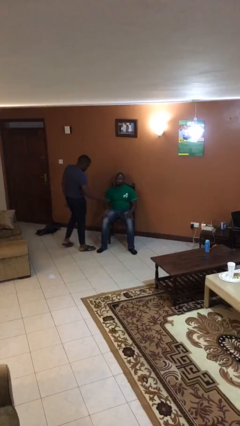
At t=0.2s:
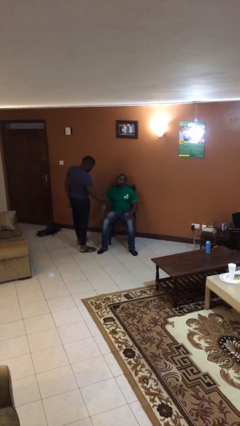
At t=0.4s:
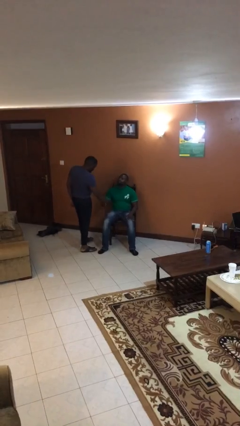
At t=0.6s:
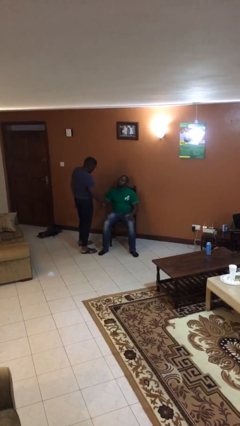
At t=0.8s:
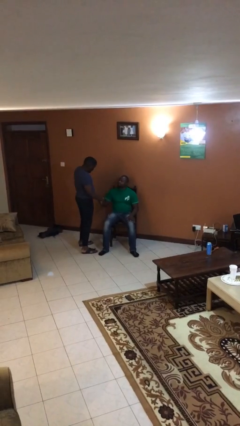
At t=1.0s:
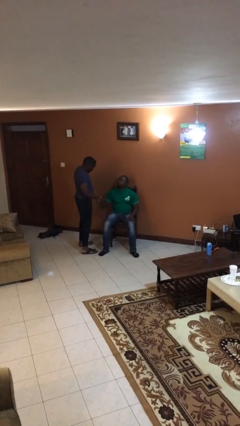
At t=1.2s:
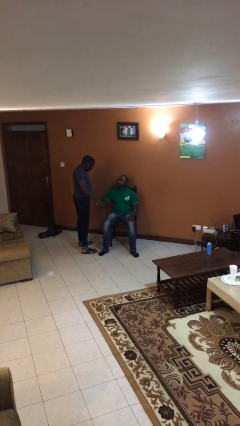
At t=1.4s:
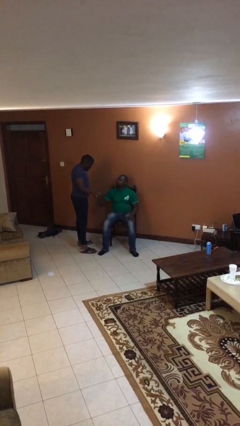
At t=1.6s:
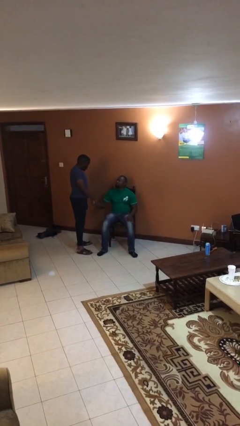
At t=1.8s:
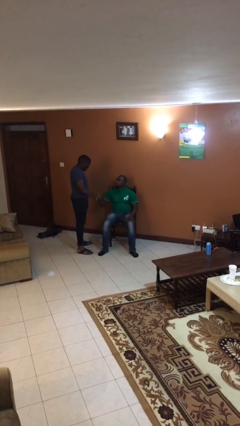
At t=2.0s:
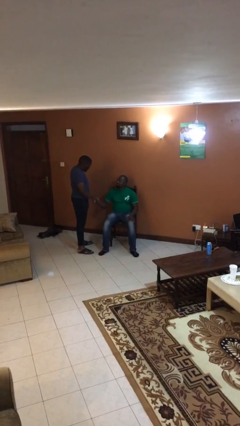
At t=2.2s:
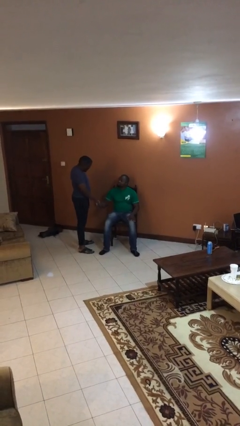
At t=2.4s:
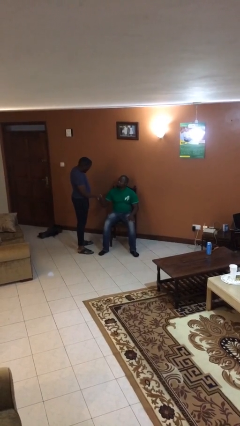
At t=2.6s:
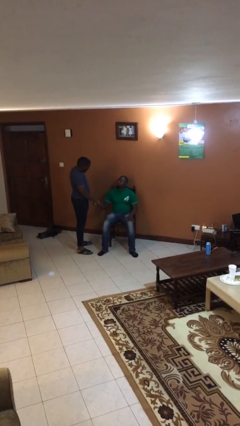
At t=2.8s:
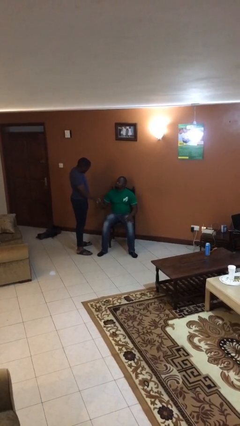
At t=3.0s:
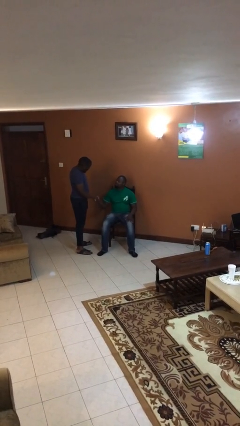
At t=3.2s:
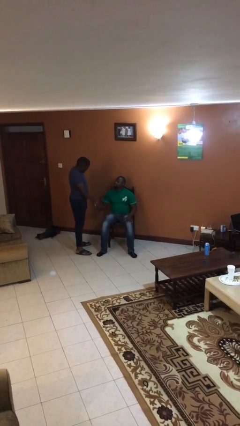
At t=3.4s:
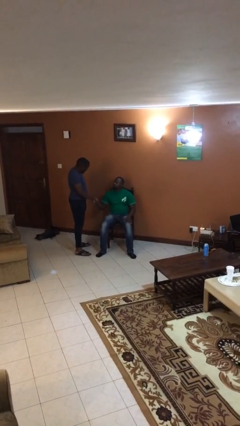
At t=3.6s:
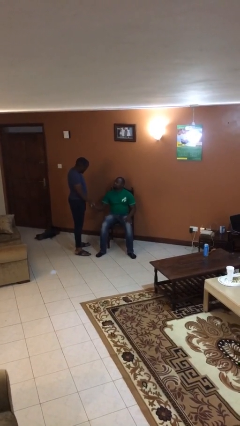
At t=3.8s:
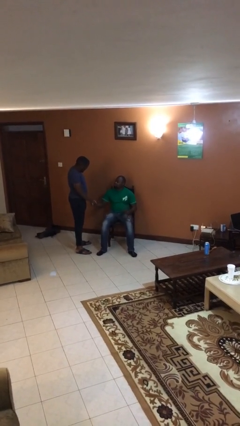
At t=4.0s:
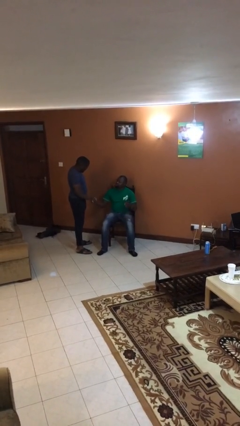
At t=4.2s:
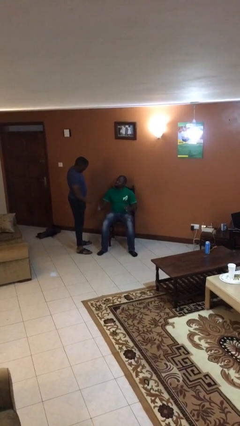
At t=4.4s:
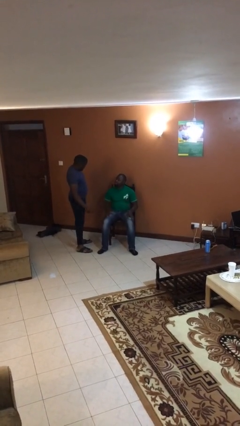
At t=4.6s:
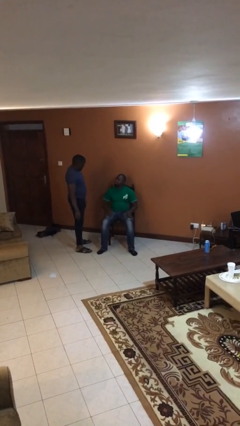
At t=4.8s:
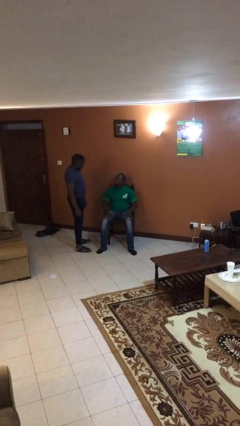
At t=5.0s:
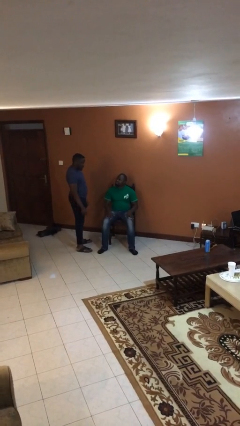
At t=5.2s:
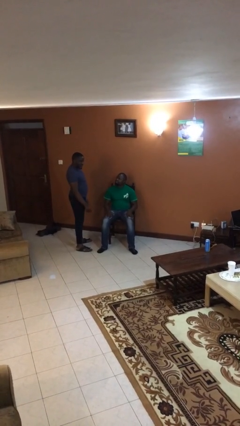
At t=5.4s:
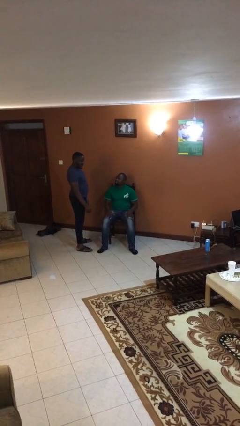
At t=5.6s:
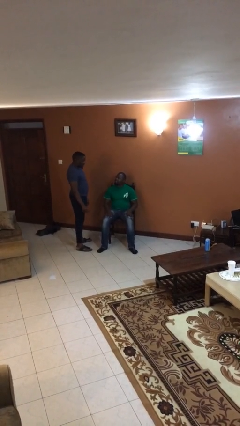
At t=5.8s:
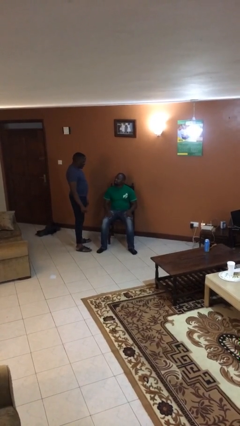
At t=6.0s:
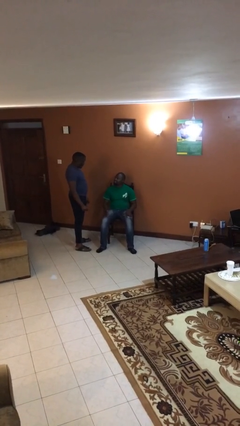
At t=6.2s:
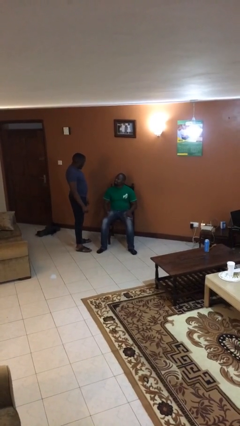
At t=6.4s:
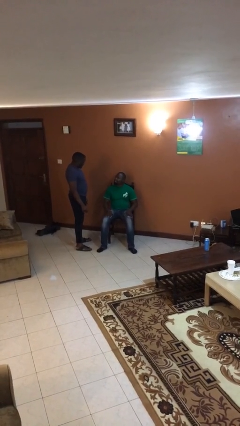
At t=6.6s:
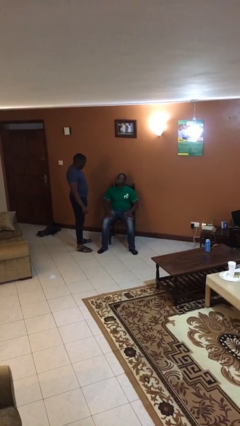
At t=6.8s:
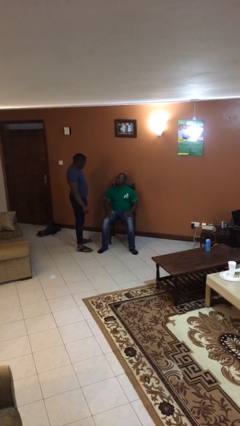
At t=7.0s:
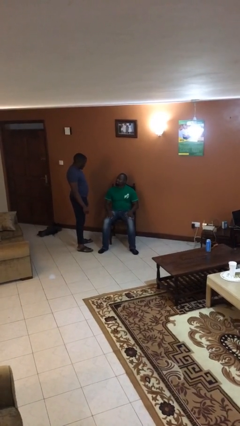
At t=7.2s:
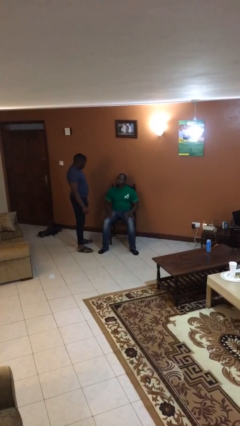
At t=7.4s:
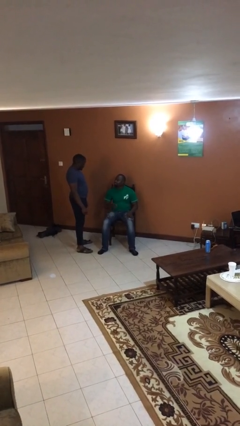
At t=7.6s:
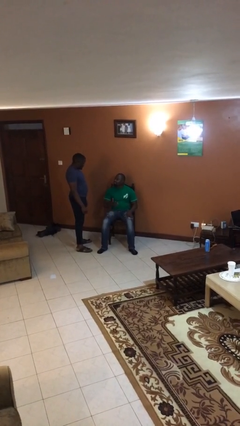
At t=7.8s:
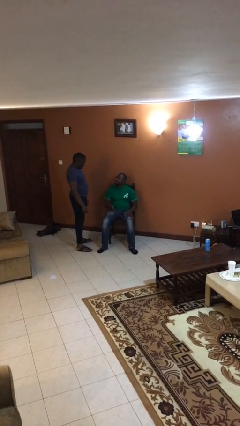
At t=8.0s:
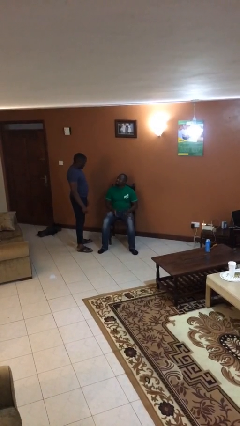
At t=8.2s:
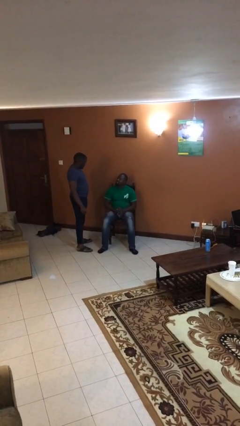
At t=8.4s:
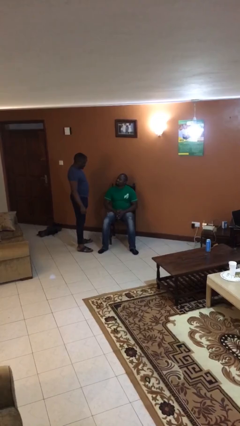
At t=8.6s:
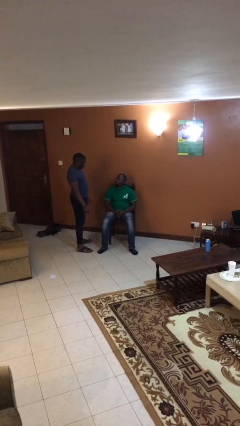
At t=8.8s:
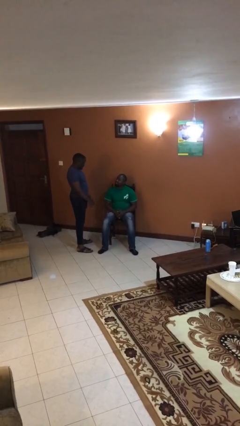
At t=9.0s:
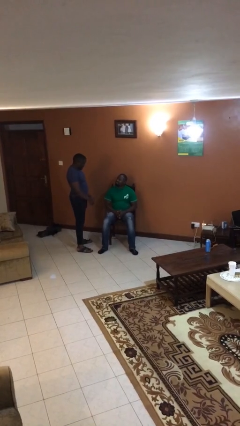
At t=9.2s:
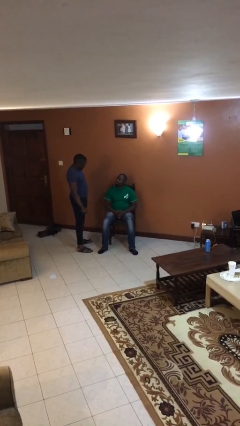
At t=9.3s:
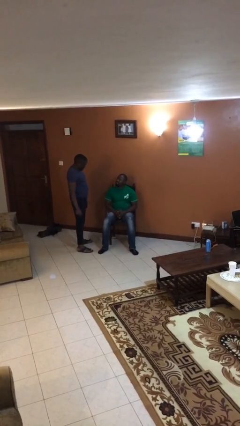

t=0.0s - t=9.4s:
person shakes hand

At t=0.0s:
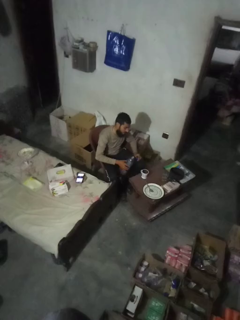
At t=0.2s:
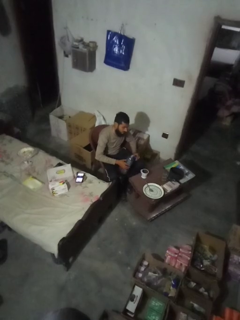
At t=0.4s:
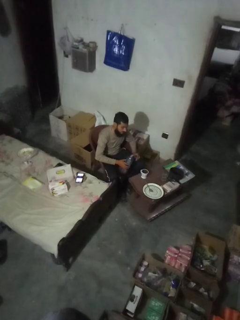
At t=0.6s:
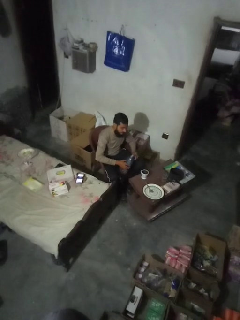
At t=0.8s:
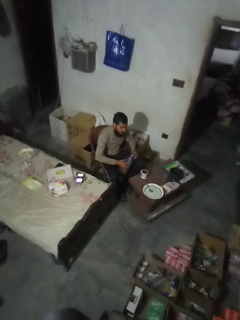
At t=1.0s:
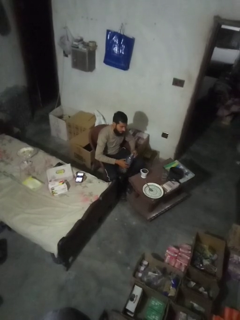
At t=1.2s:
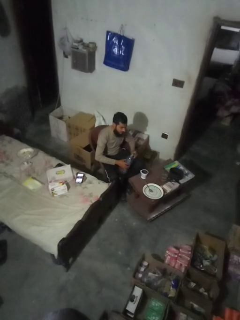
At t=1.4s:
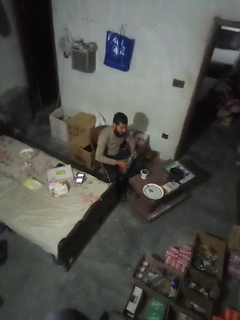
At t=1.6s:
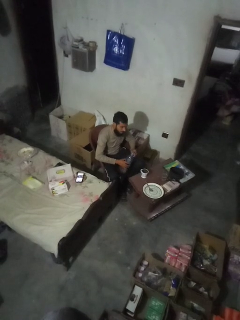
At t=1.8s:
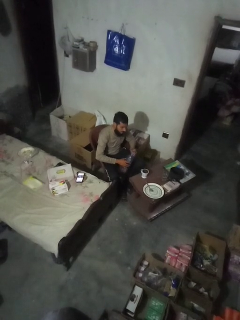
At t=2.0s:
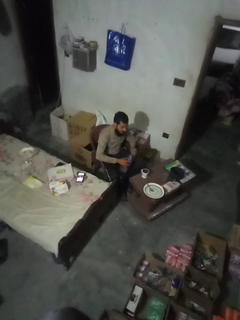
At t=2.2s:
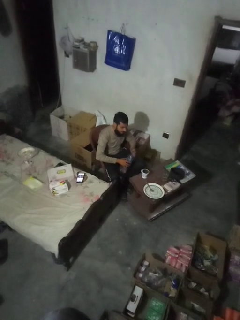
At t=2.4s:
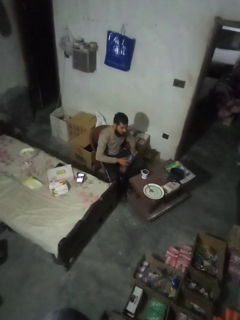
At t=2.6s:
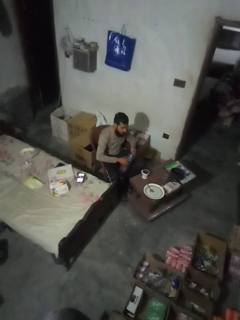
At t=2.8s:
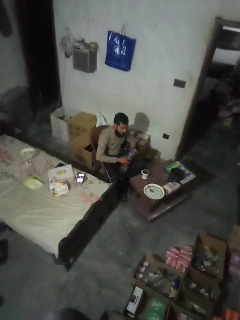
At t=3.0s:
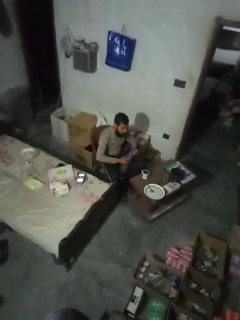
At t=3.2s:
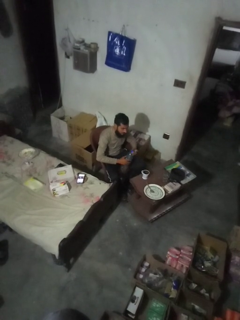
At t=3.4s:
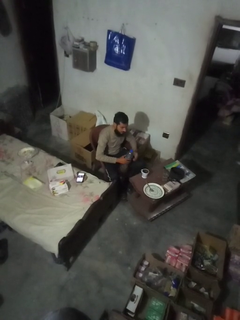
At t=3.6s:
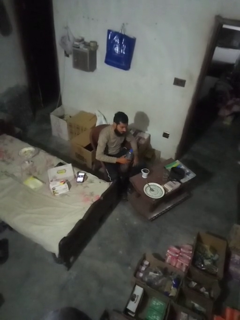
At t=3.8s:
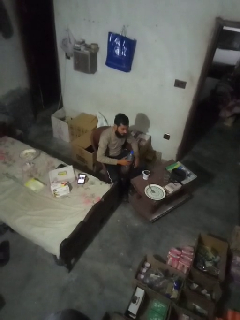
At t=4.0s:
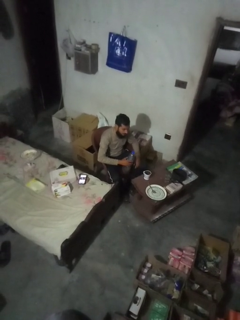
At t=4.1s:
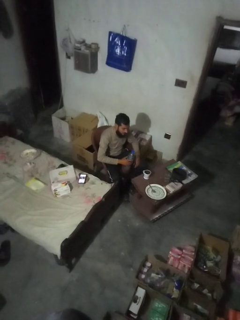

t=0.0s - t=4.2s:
person screws lid to bottle

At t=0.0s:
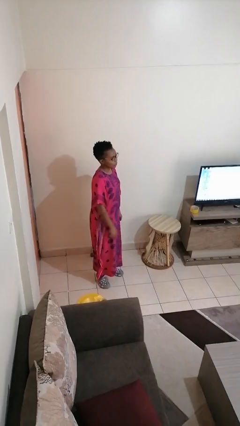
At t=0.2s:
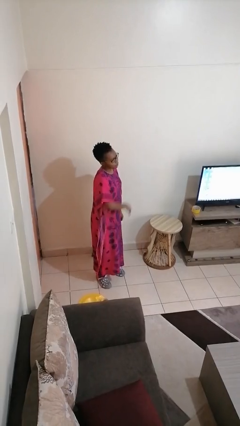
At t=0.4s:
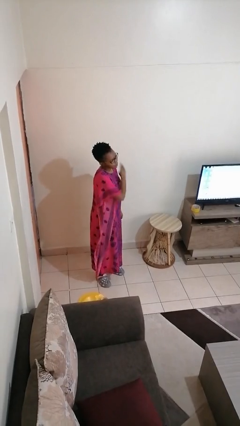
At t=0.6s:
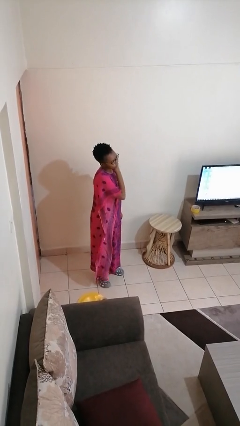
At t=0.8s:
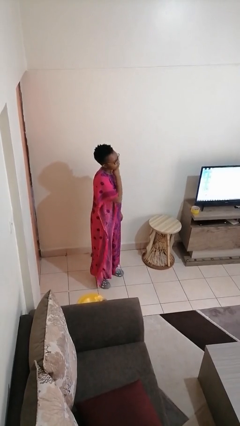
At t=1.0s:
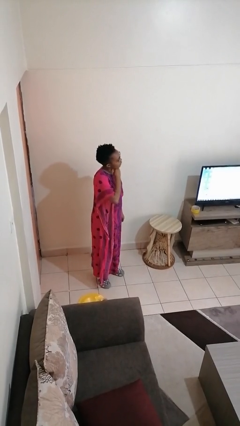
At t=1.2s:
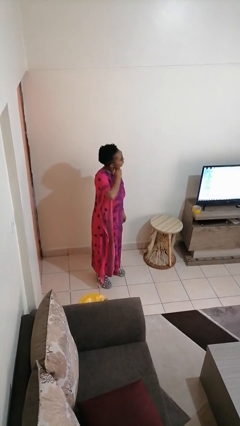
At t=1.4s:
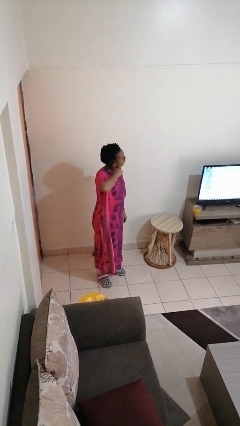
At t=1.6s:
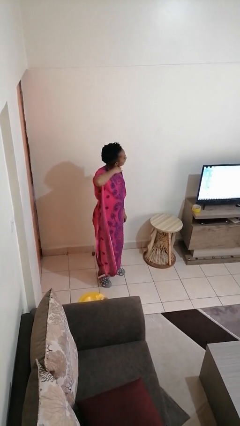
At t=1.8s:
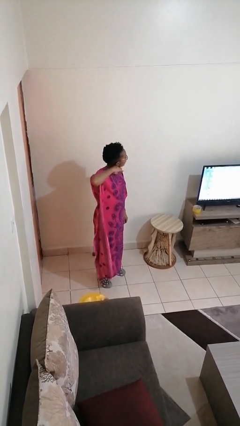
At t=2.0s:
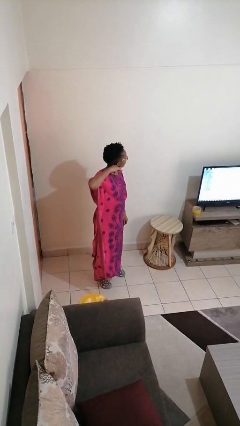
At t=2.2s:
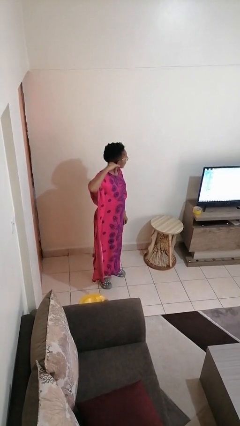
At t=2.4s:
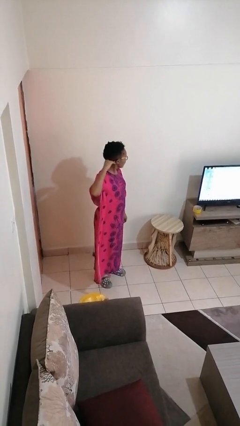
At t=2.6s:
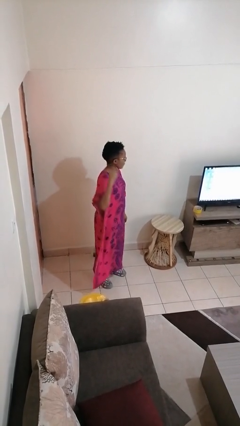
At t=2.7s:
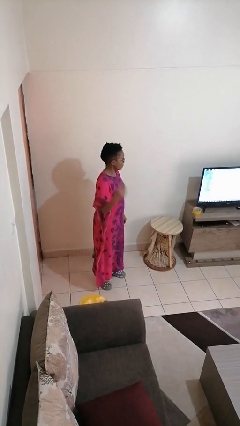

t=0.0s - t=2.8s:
person gestures cut

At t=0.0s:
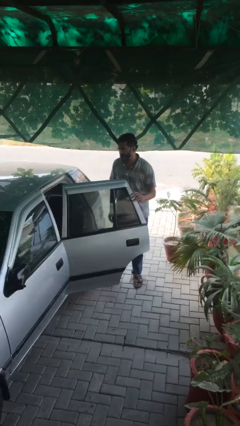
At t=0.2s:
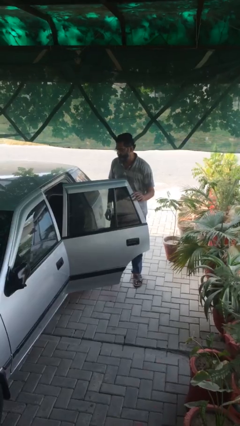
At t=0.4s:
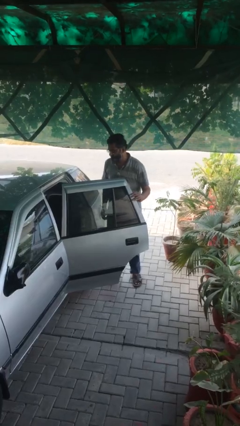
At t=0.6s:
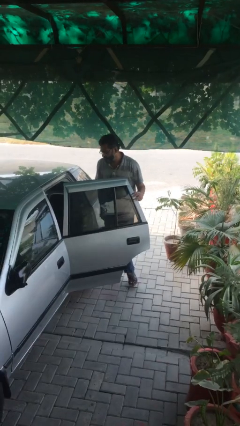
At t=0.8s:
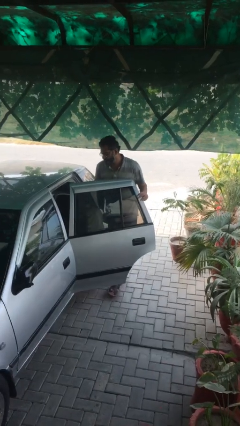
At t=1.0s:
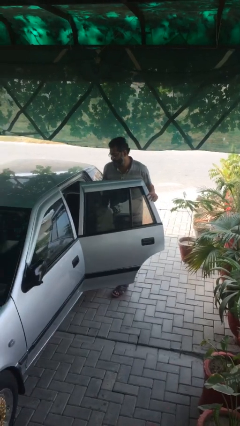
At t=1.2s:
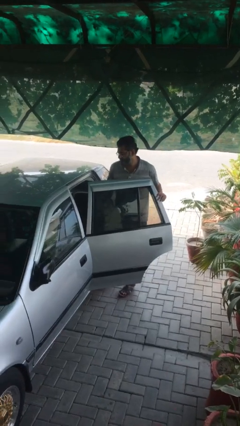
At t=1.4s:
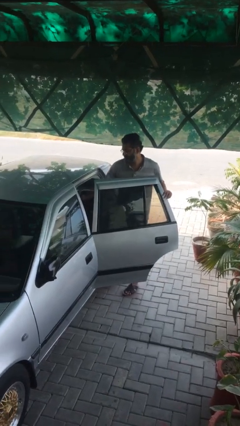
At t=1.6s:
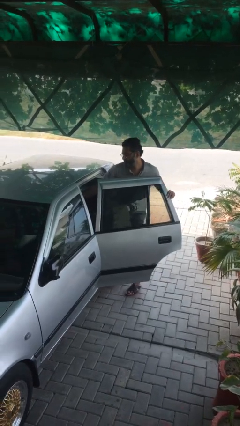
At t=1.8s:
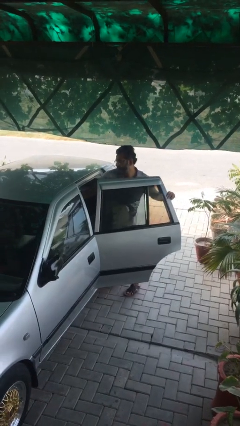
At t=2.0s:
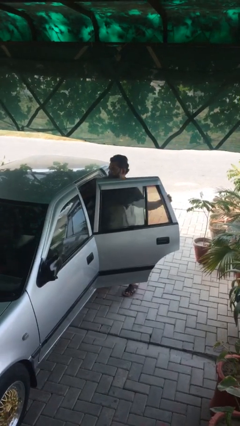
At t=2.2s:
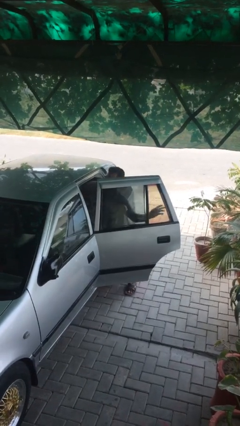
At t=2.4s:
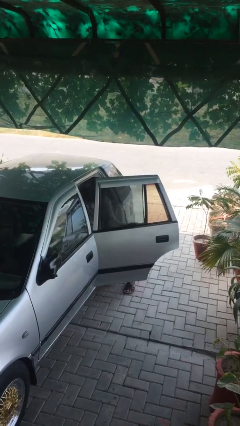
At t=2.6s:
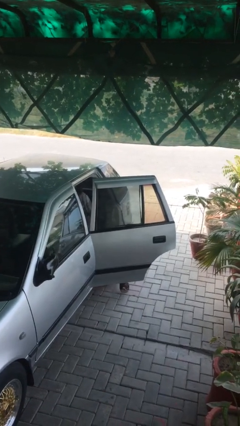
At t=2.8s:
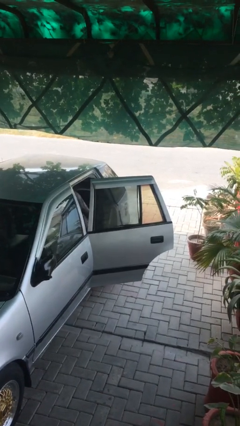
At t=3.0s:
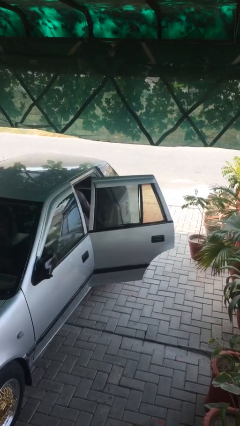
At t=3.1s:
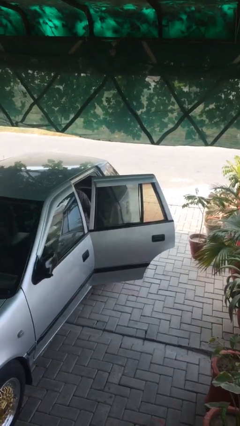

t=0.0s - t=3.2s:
person enters car
